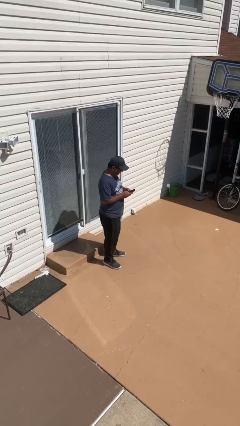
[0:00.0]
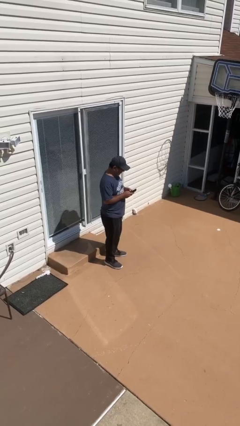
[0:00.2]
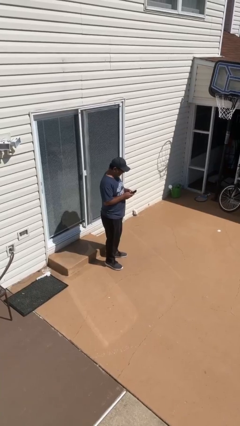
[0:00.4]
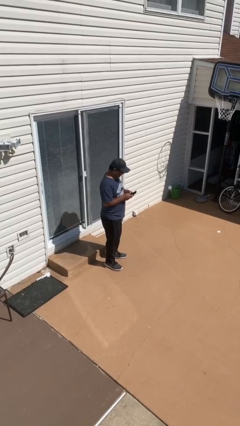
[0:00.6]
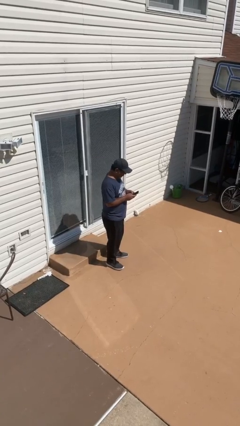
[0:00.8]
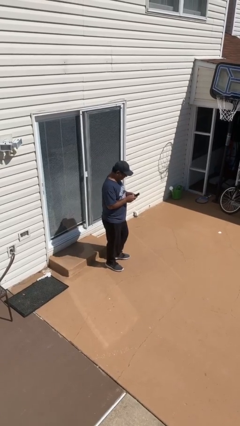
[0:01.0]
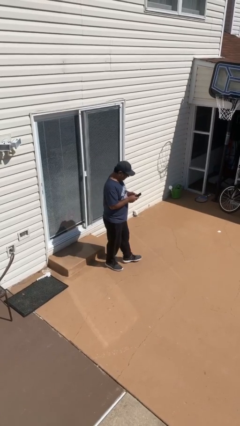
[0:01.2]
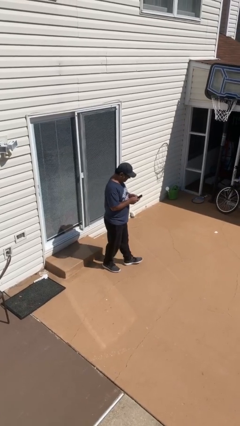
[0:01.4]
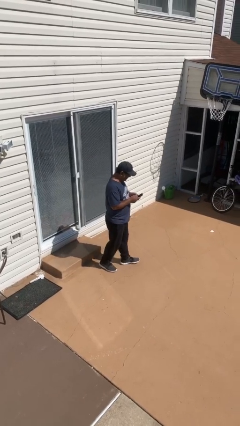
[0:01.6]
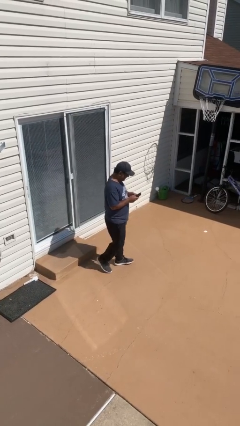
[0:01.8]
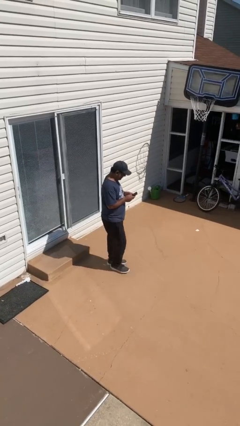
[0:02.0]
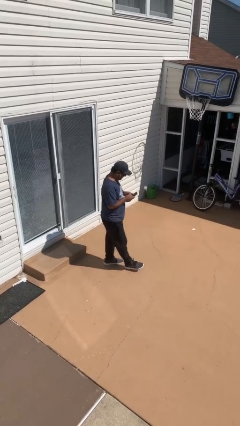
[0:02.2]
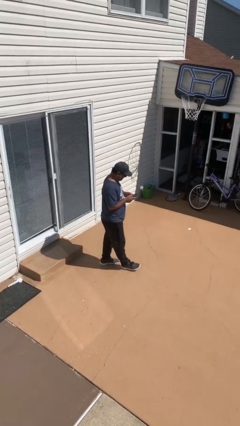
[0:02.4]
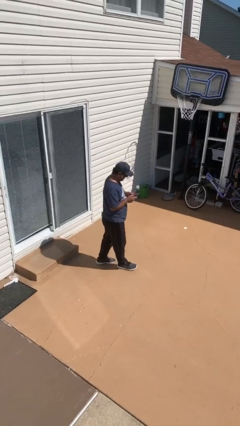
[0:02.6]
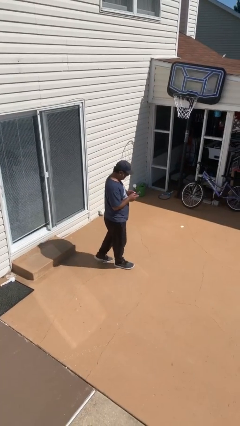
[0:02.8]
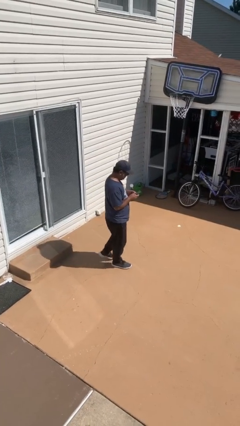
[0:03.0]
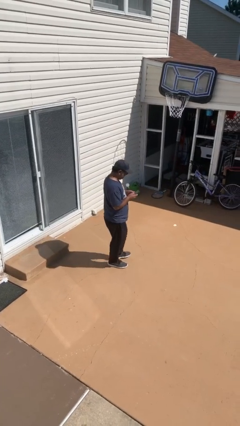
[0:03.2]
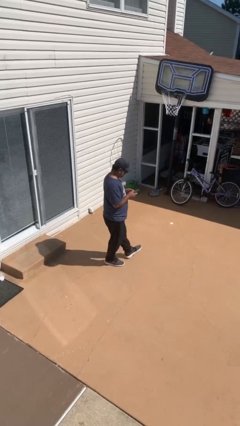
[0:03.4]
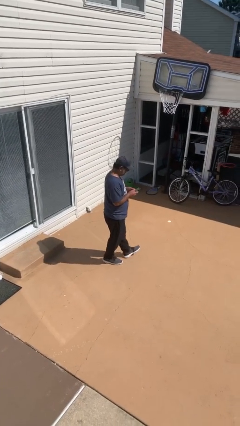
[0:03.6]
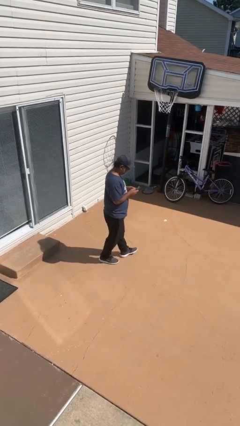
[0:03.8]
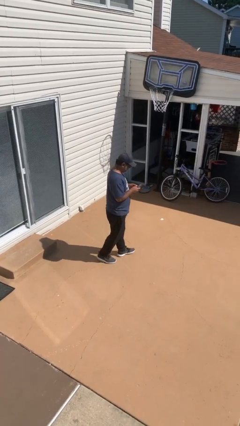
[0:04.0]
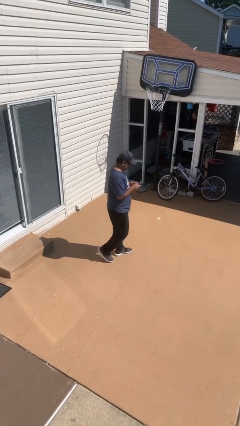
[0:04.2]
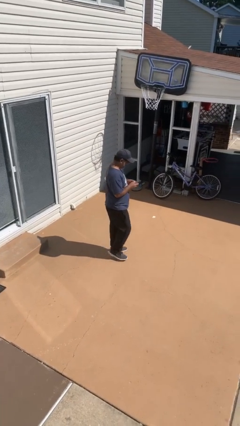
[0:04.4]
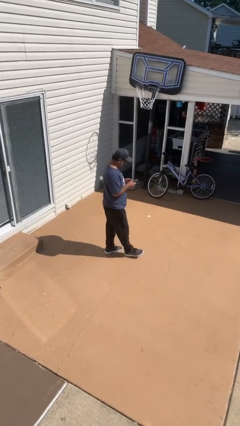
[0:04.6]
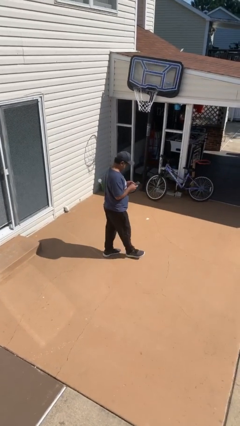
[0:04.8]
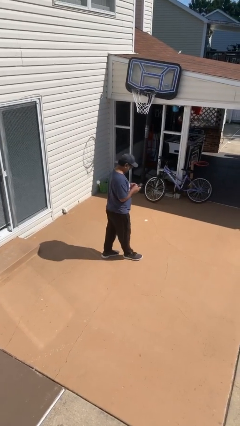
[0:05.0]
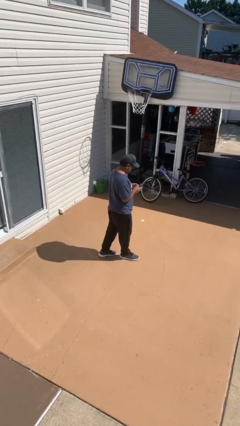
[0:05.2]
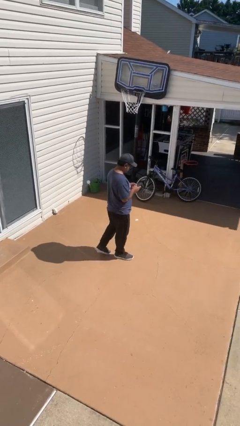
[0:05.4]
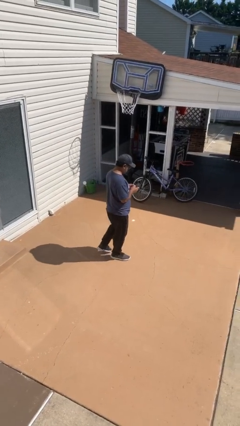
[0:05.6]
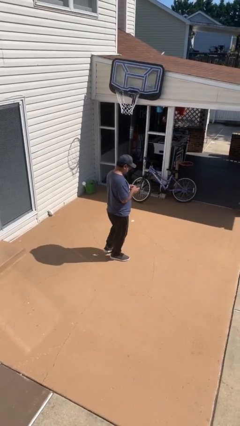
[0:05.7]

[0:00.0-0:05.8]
person texts on phone

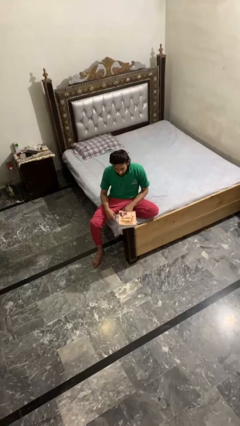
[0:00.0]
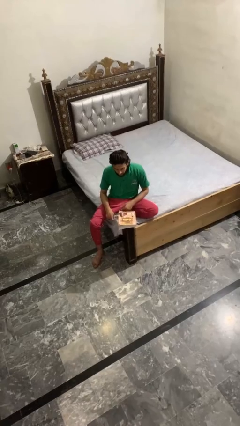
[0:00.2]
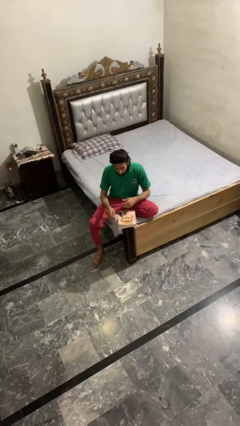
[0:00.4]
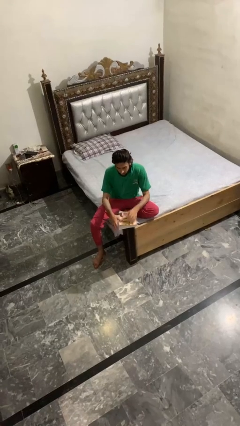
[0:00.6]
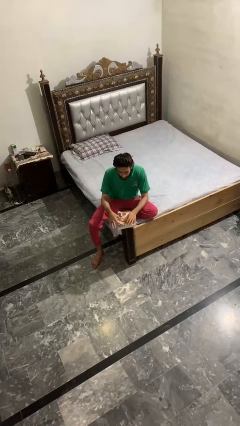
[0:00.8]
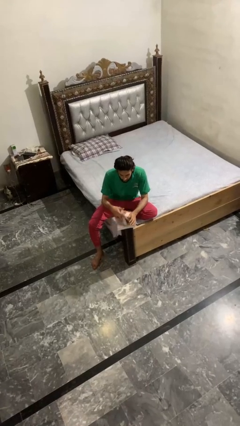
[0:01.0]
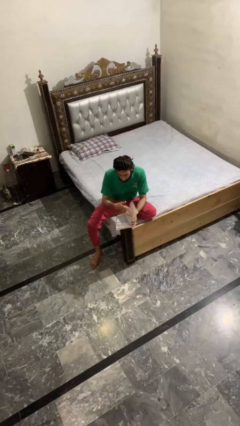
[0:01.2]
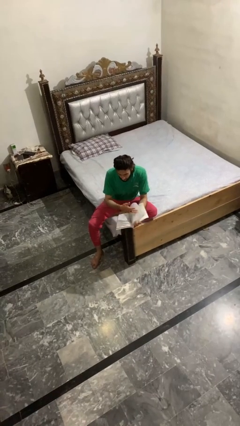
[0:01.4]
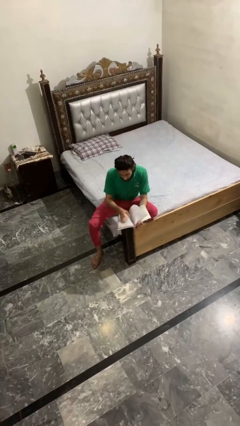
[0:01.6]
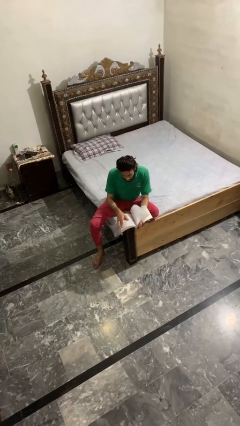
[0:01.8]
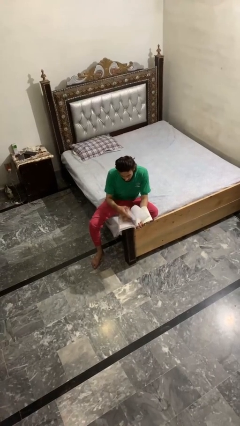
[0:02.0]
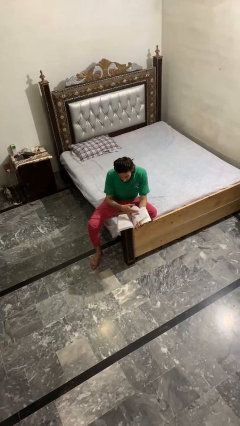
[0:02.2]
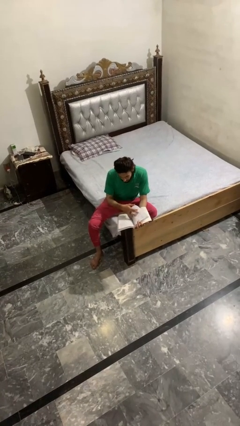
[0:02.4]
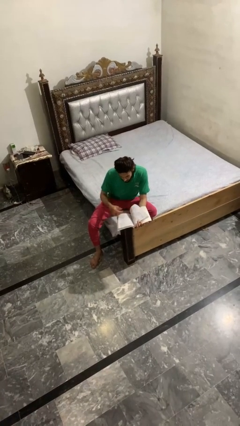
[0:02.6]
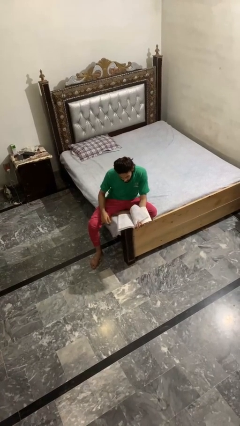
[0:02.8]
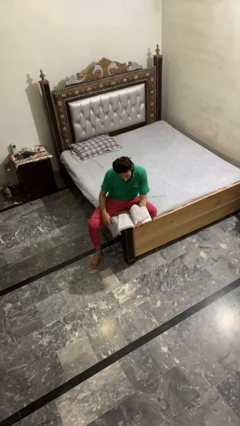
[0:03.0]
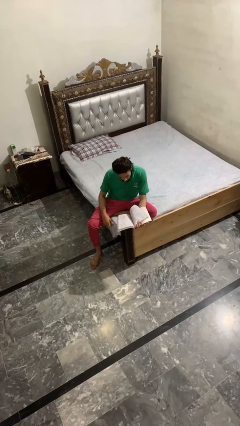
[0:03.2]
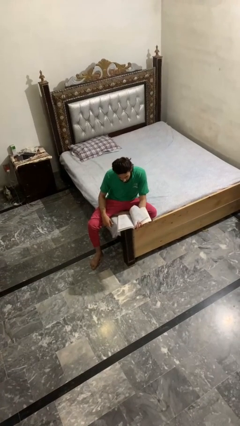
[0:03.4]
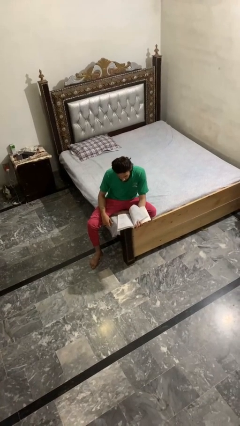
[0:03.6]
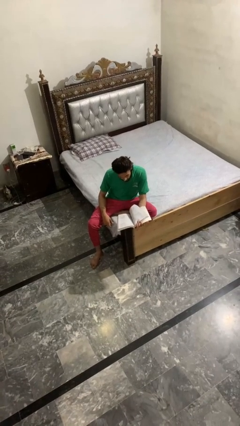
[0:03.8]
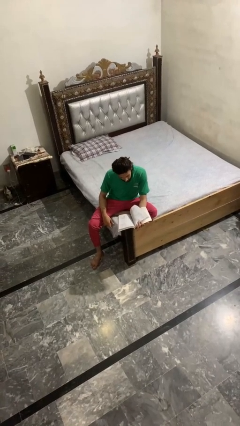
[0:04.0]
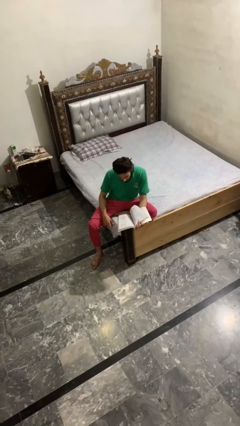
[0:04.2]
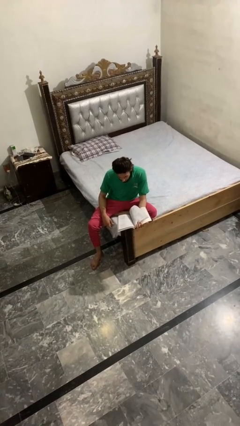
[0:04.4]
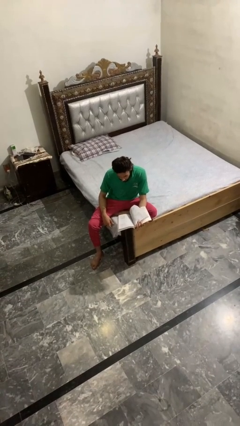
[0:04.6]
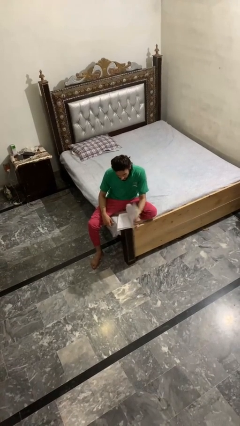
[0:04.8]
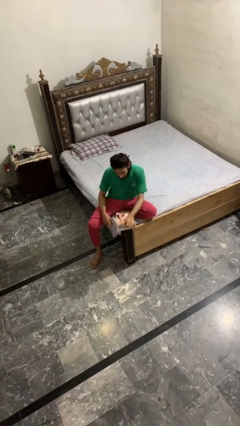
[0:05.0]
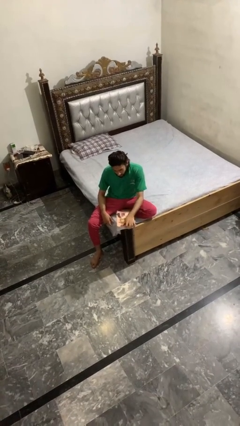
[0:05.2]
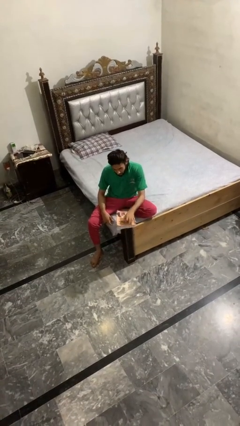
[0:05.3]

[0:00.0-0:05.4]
person reads book

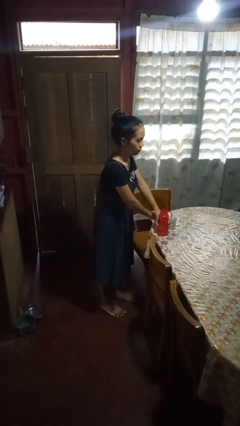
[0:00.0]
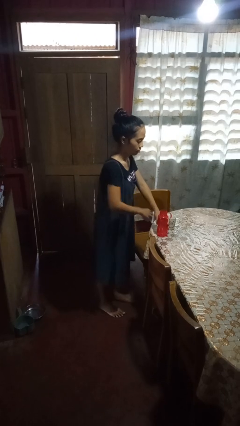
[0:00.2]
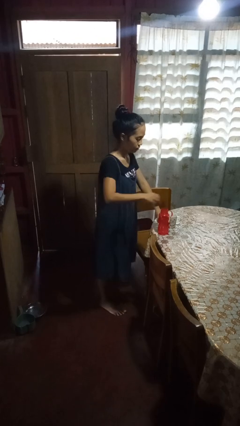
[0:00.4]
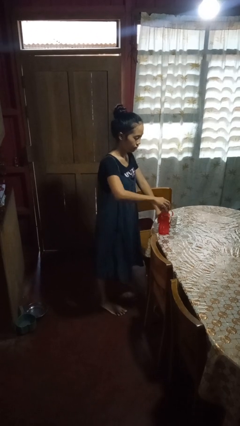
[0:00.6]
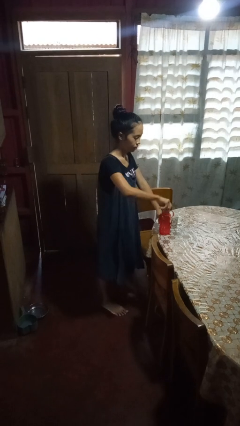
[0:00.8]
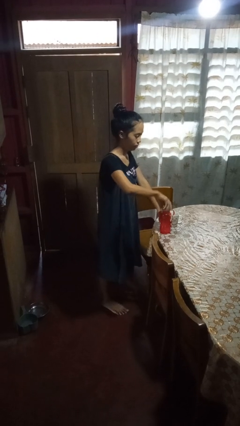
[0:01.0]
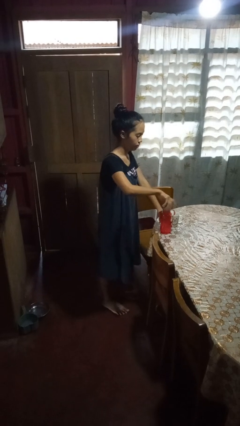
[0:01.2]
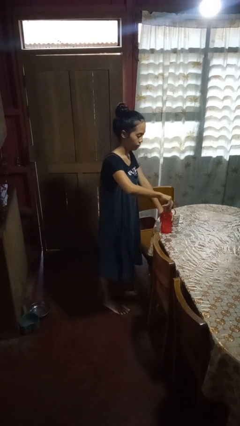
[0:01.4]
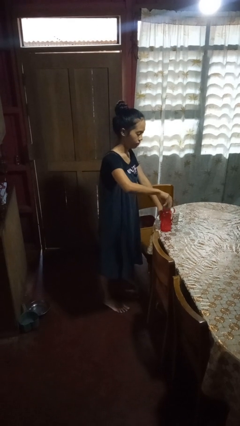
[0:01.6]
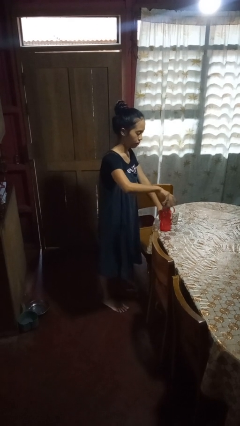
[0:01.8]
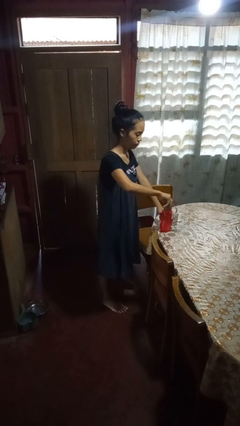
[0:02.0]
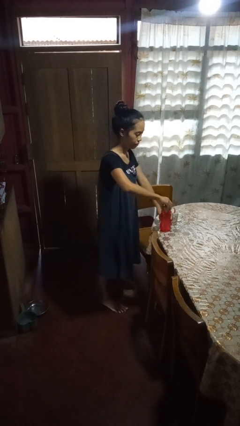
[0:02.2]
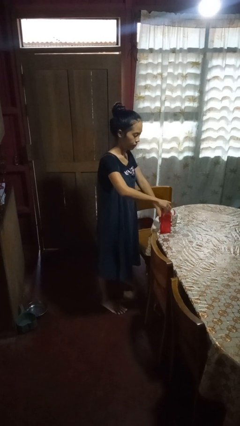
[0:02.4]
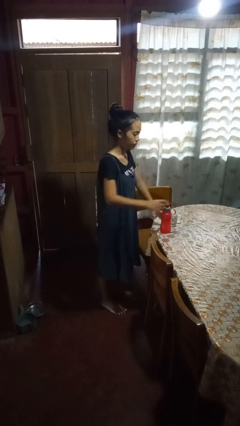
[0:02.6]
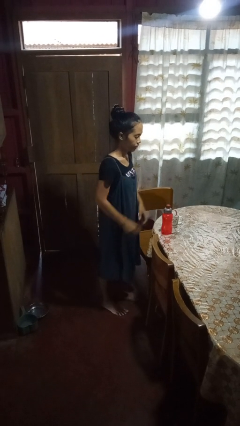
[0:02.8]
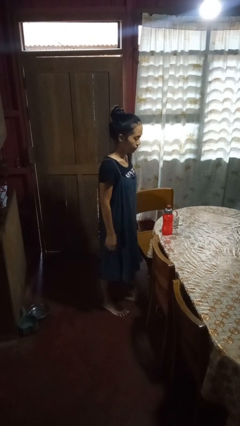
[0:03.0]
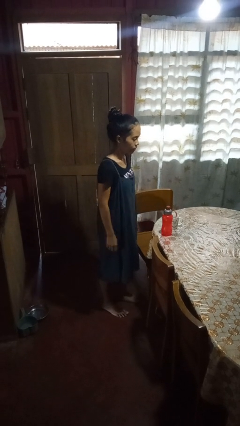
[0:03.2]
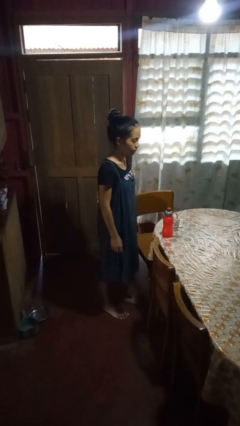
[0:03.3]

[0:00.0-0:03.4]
person screws lid to bottle

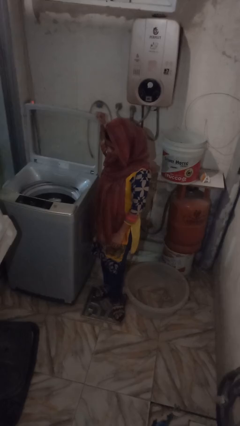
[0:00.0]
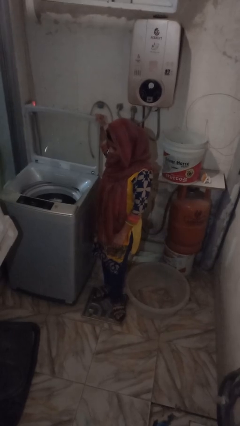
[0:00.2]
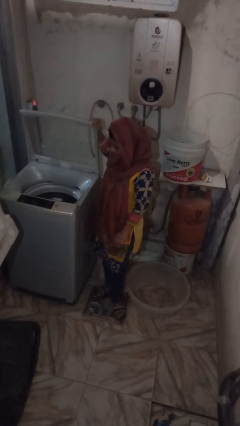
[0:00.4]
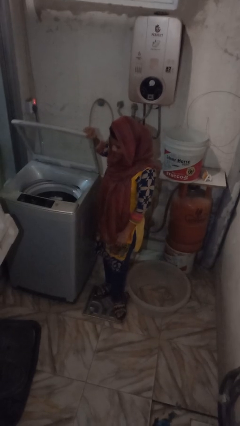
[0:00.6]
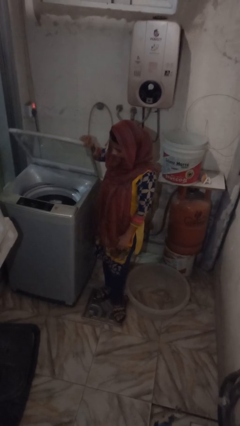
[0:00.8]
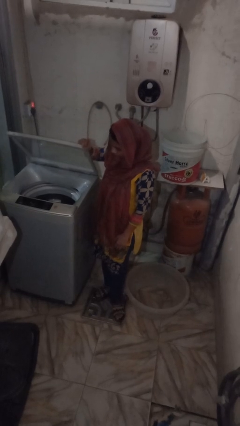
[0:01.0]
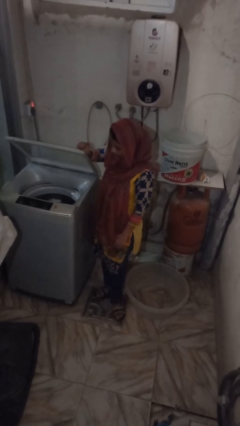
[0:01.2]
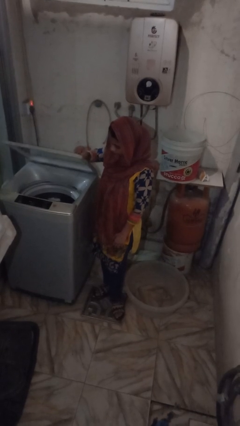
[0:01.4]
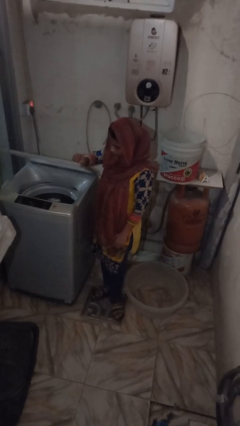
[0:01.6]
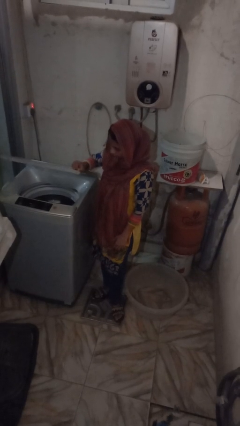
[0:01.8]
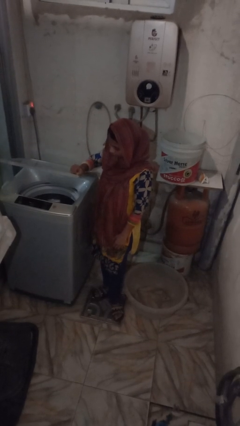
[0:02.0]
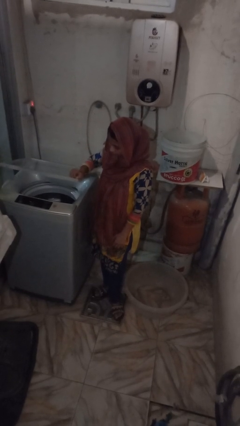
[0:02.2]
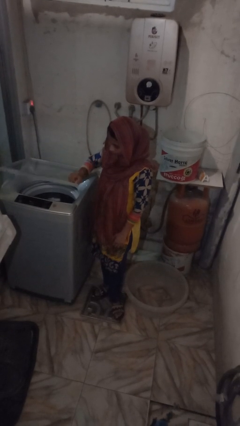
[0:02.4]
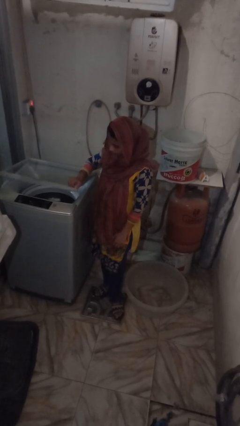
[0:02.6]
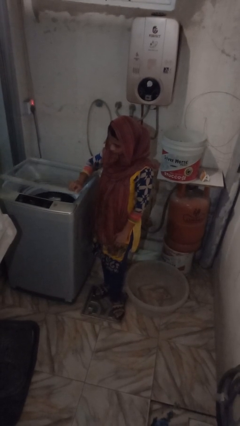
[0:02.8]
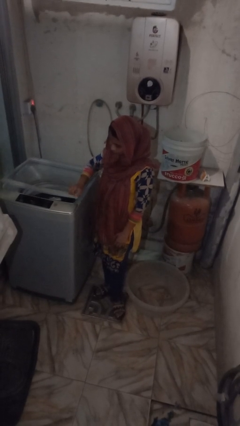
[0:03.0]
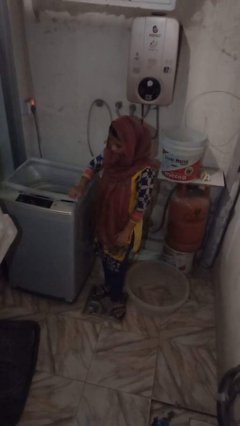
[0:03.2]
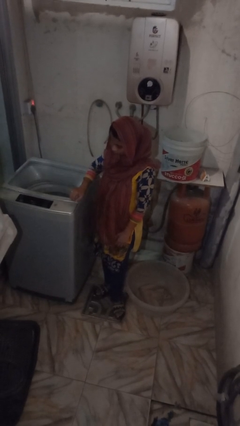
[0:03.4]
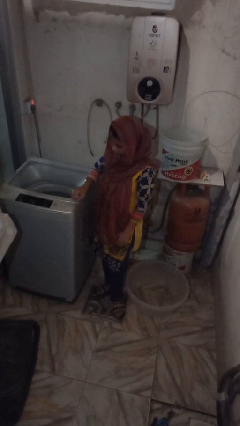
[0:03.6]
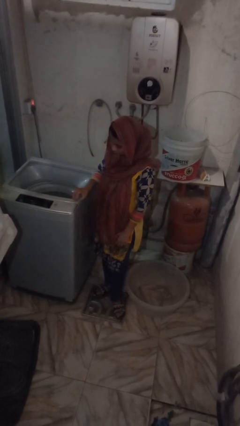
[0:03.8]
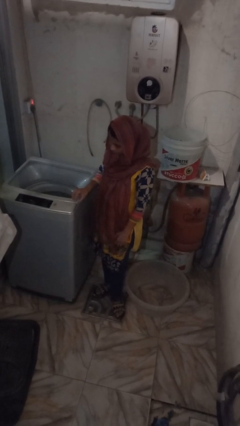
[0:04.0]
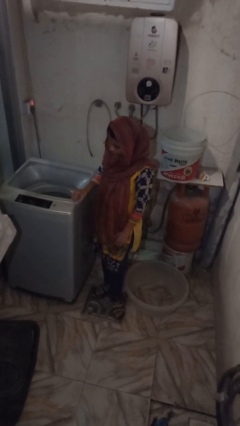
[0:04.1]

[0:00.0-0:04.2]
person closes clothes washer
